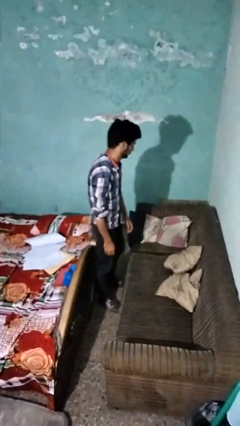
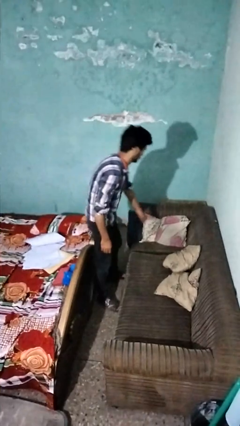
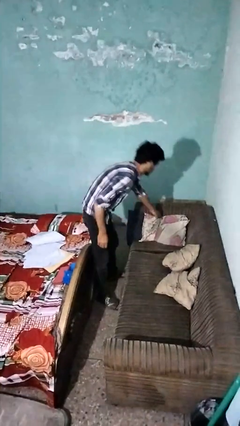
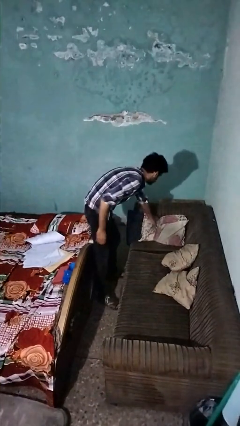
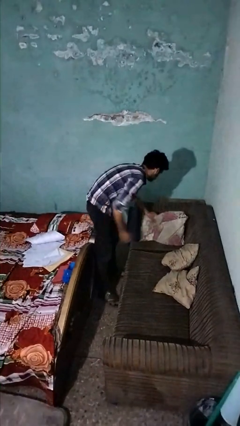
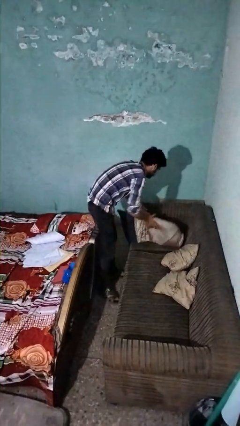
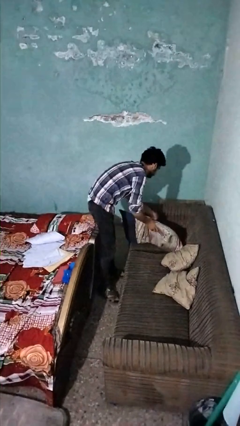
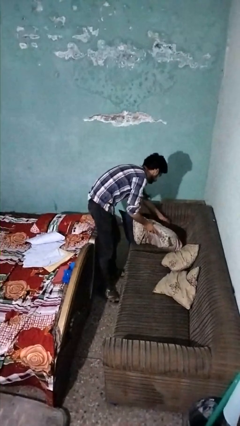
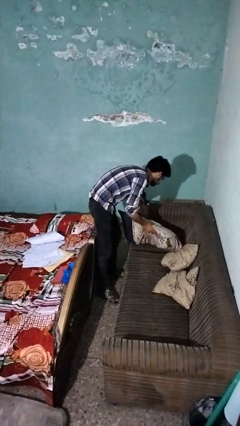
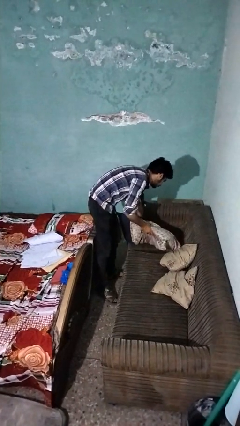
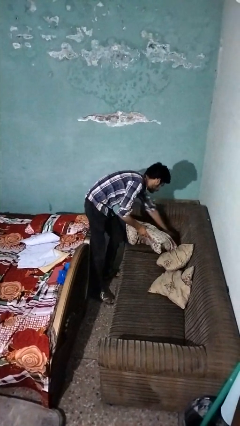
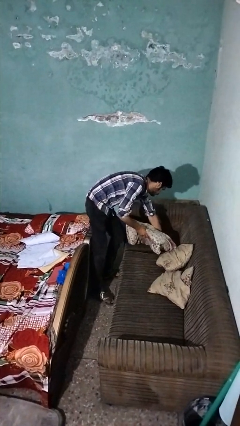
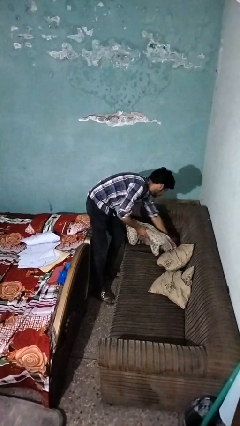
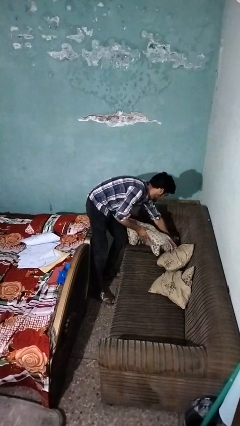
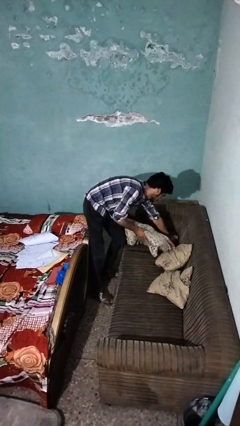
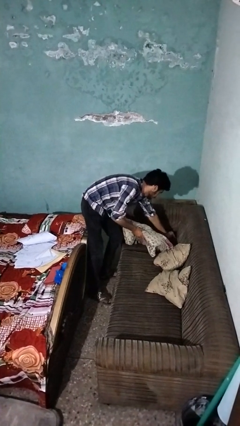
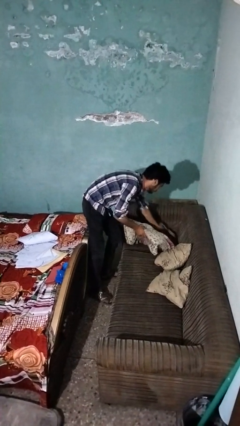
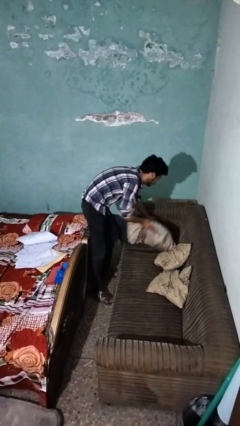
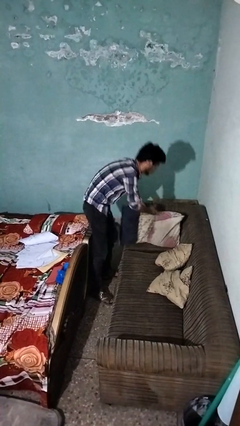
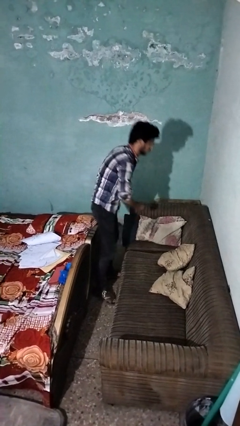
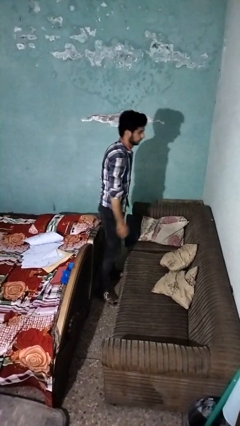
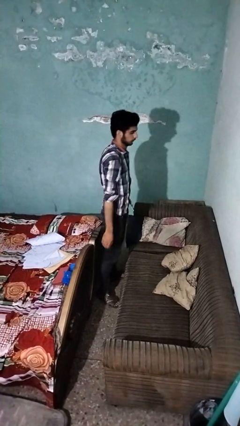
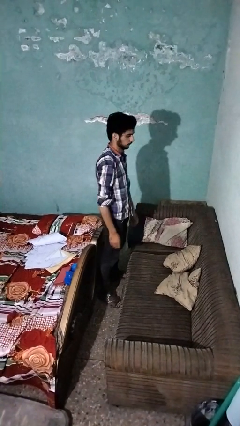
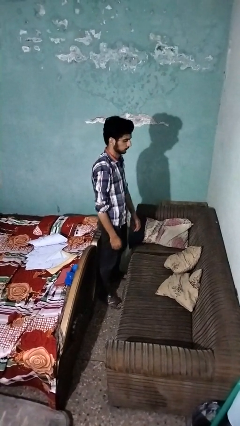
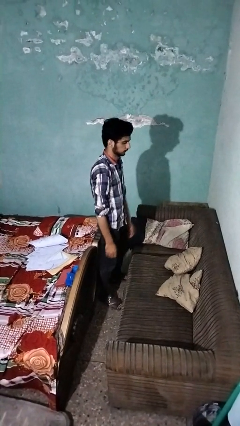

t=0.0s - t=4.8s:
person searches in couch

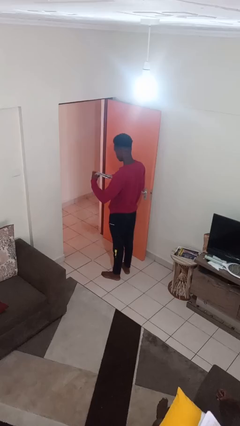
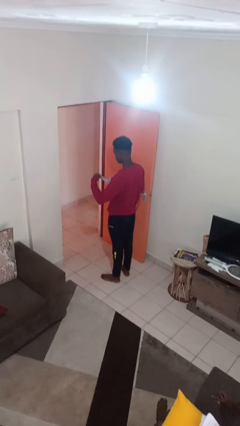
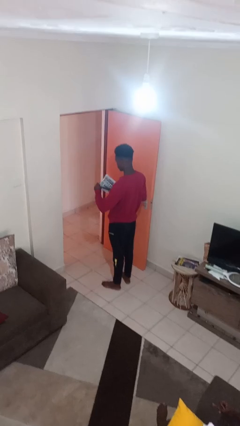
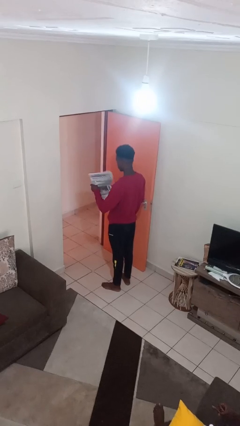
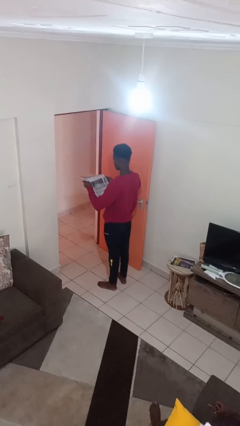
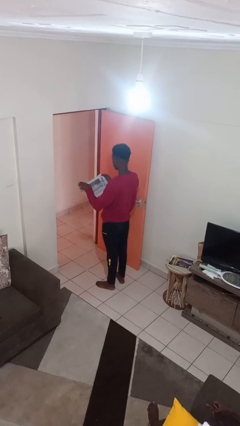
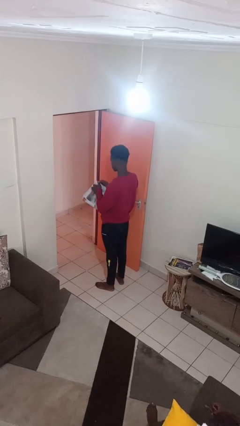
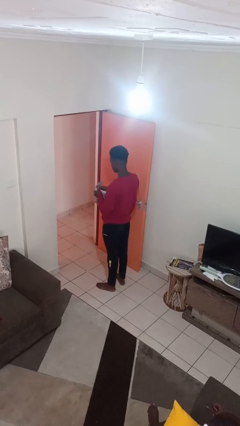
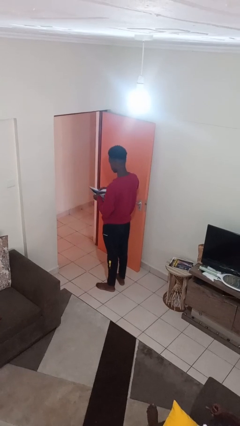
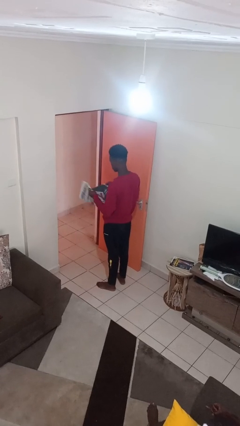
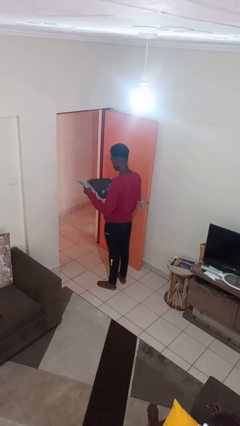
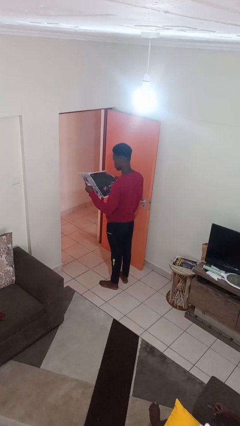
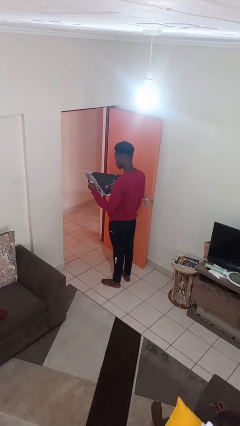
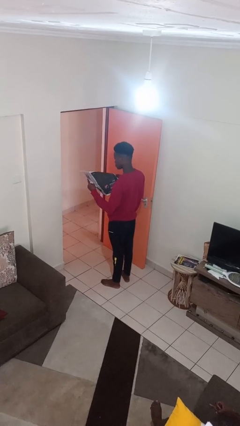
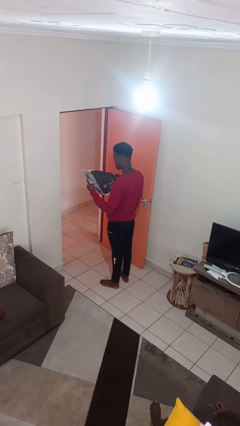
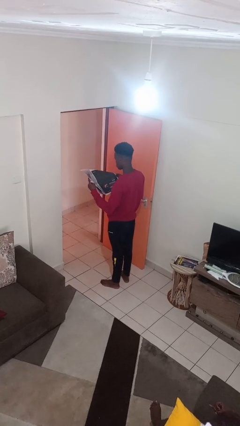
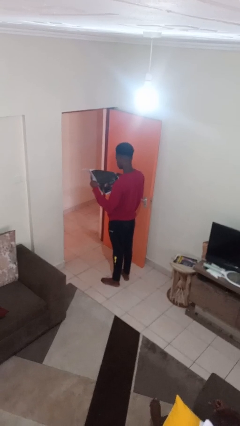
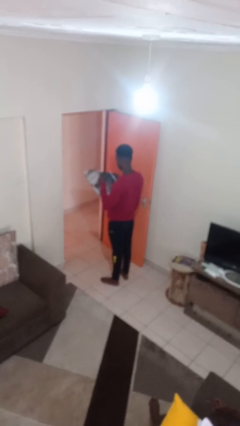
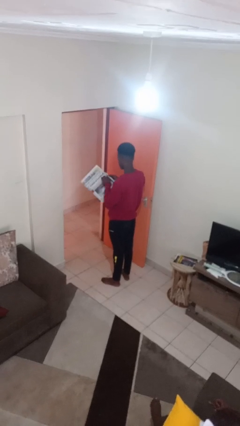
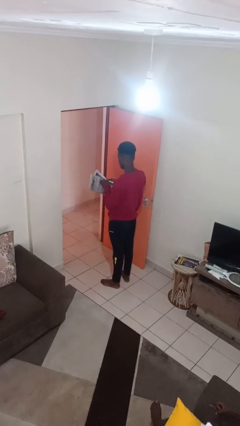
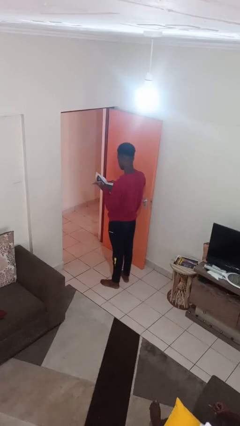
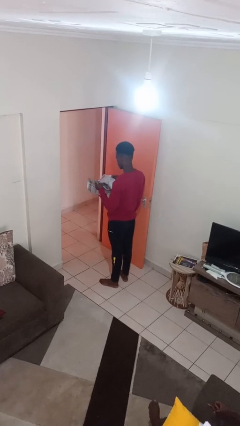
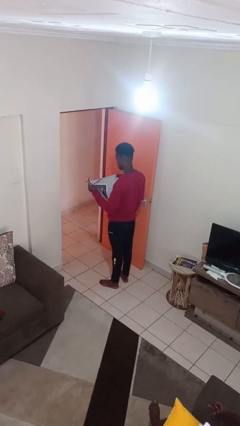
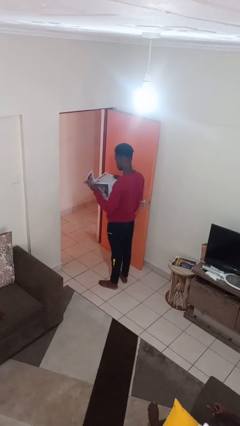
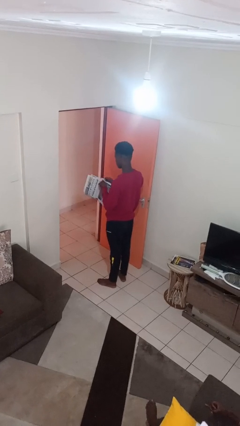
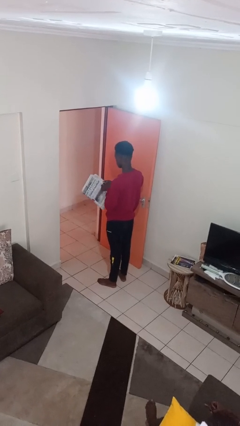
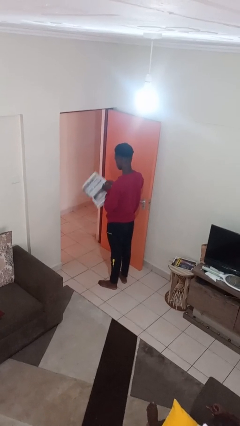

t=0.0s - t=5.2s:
person reads newspaper

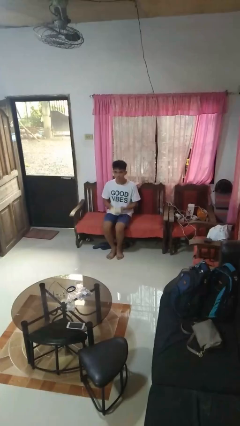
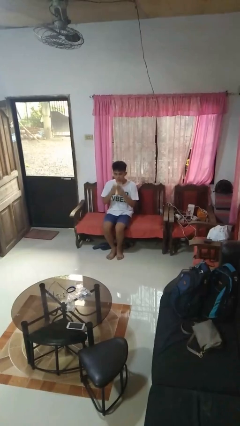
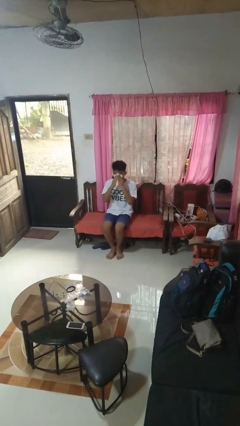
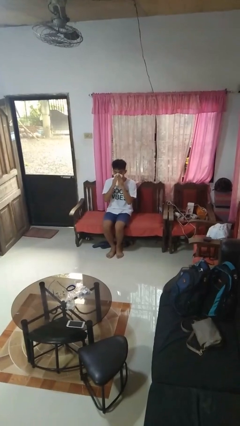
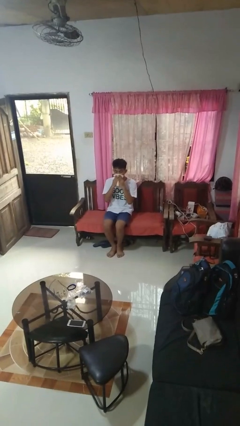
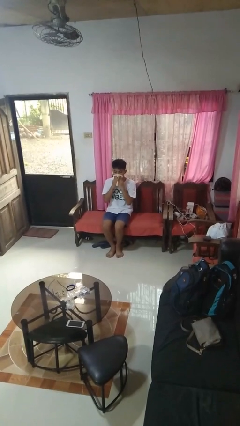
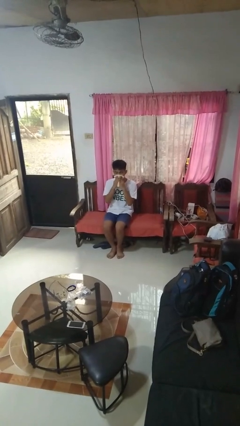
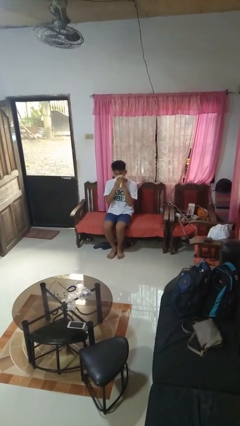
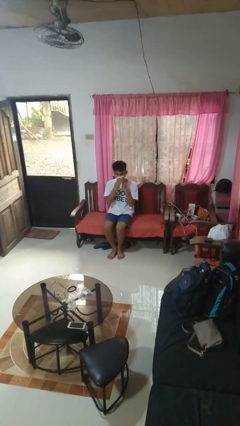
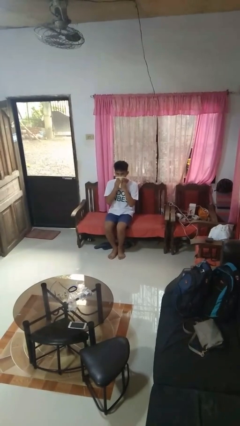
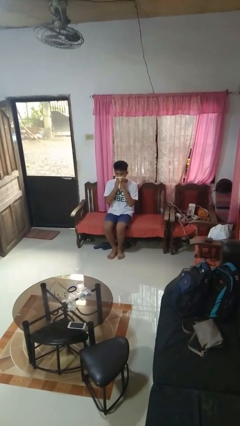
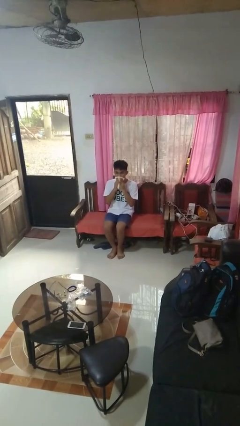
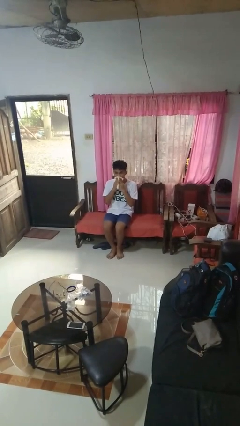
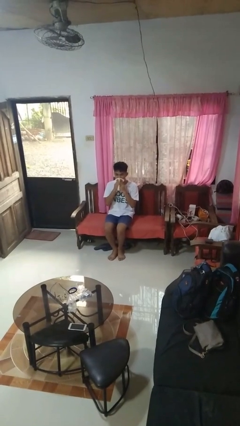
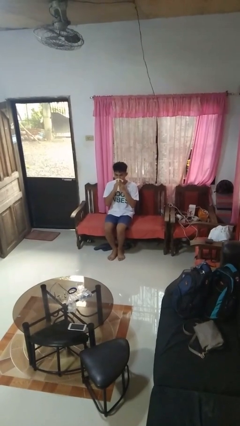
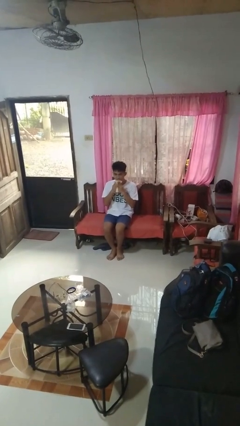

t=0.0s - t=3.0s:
person wipes mouth with napkin

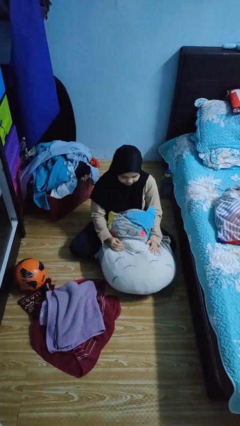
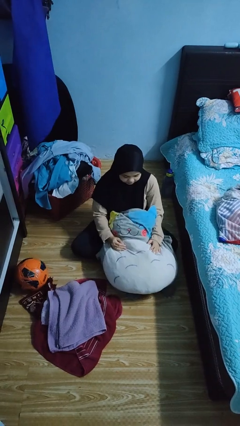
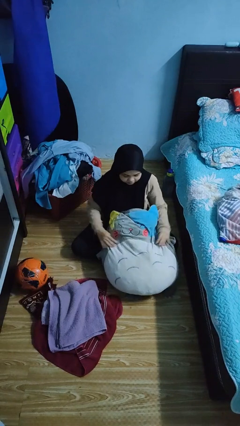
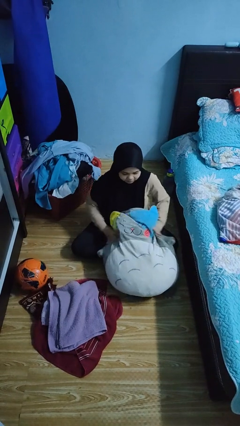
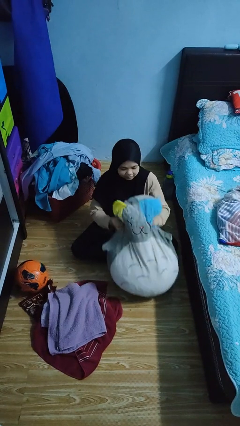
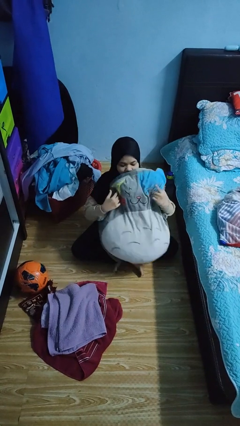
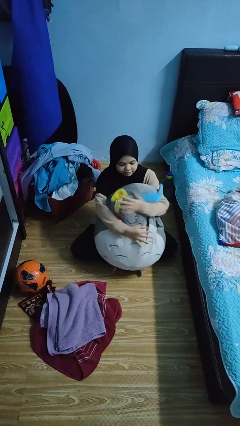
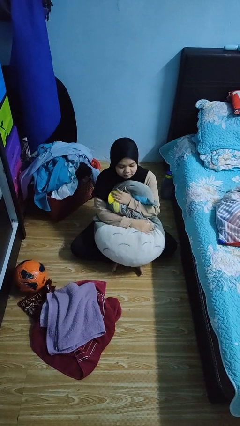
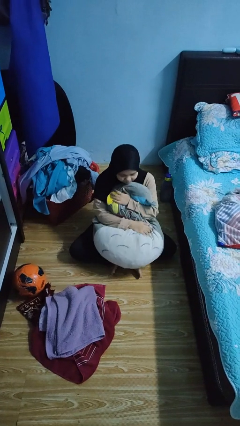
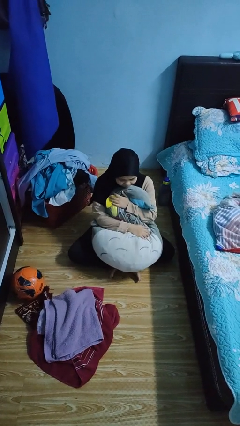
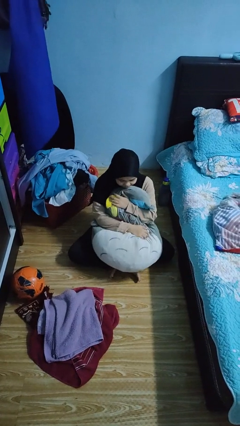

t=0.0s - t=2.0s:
person hugs stuffed animal

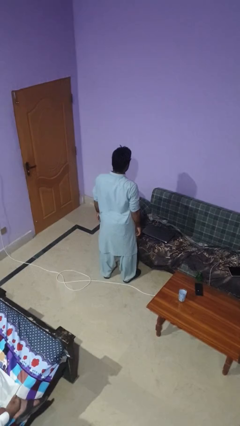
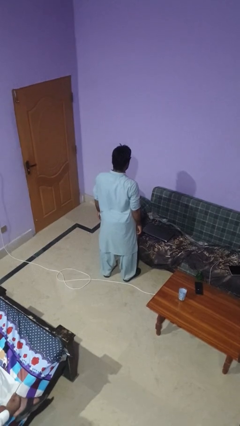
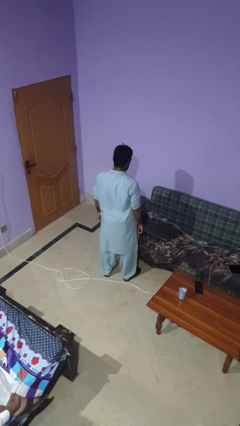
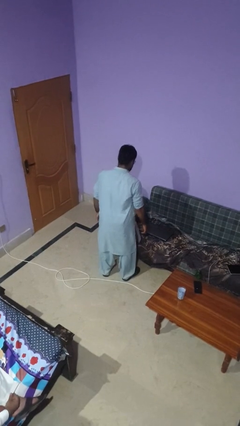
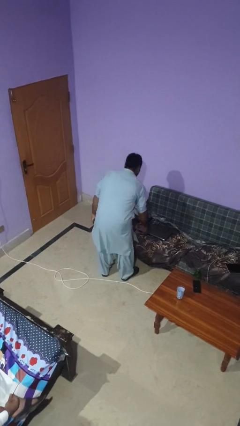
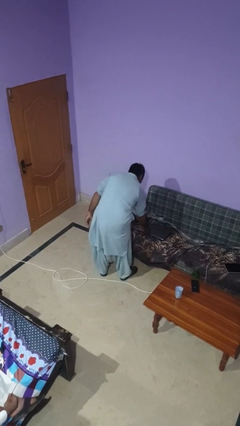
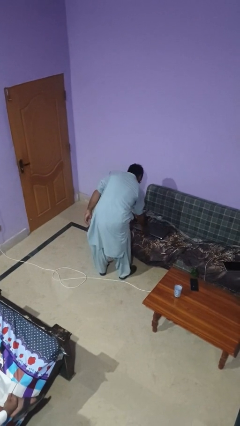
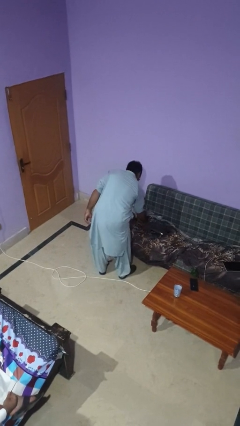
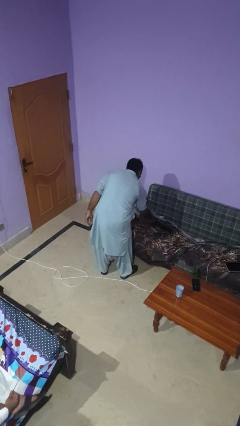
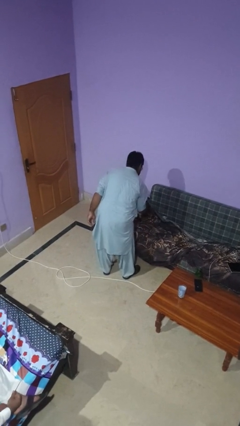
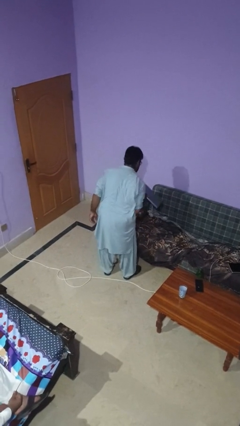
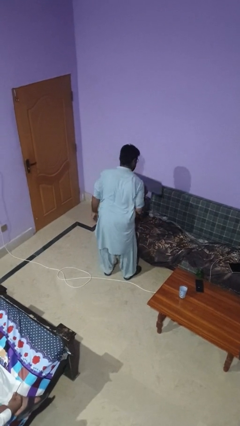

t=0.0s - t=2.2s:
person picks up object from couch
